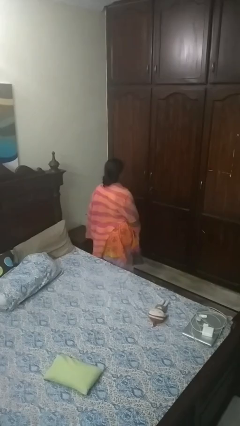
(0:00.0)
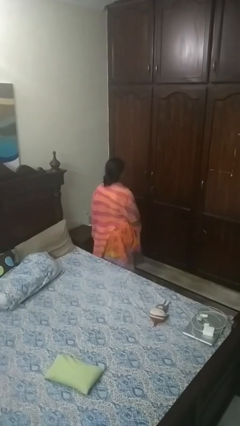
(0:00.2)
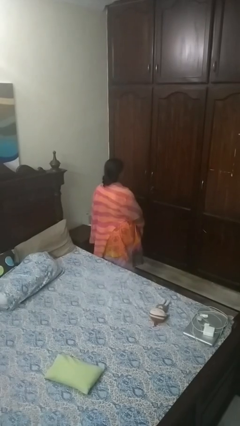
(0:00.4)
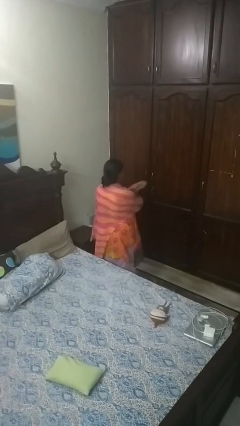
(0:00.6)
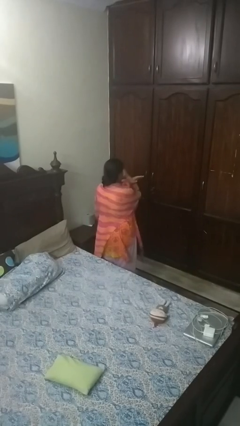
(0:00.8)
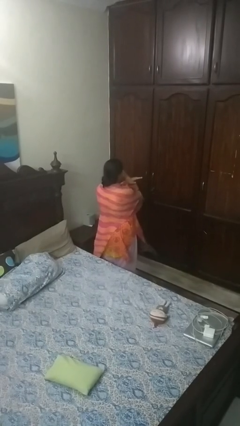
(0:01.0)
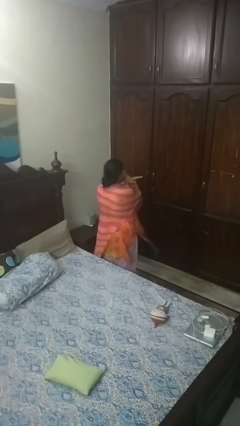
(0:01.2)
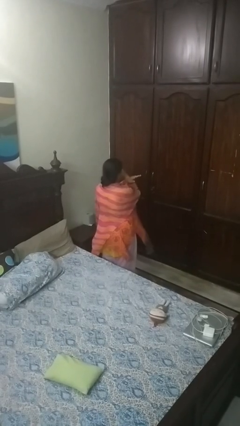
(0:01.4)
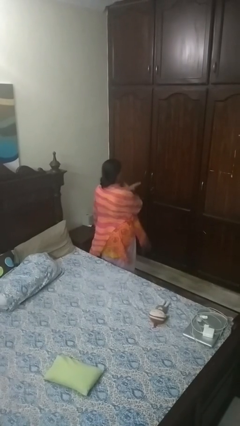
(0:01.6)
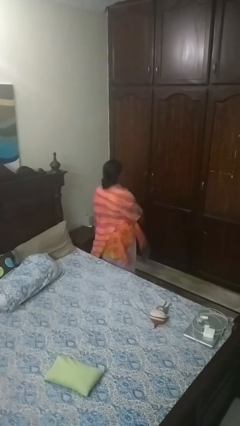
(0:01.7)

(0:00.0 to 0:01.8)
person gestures arms x

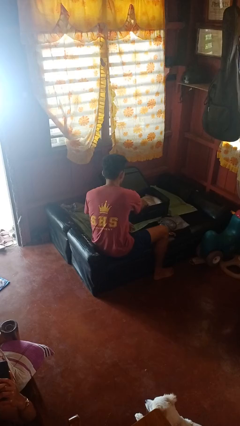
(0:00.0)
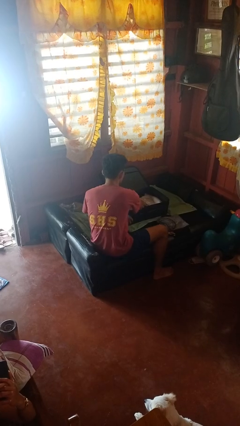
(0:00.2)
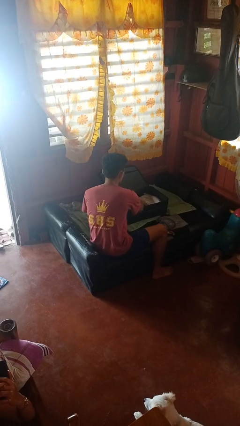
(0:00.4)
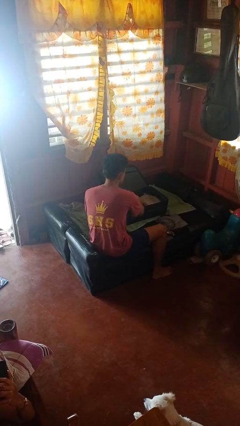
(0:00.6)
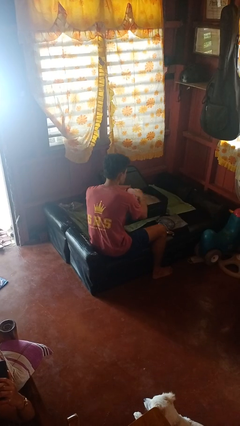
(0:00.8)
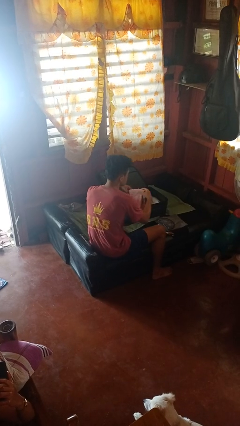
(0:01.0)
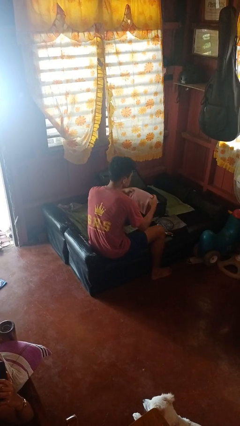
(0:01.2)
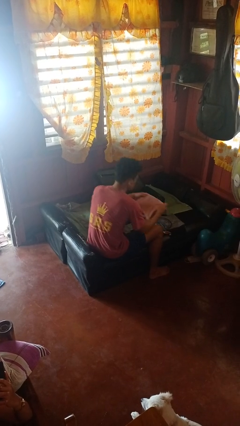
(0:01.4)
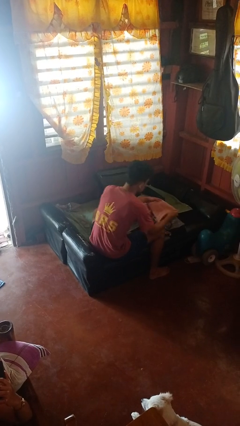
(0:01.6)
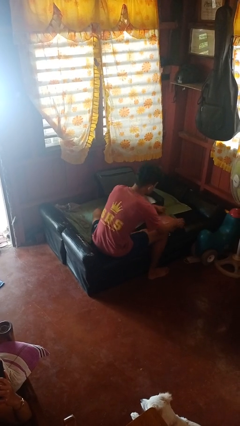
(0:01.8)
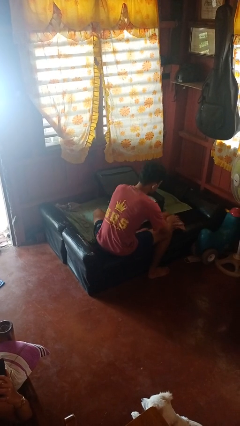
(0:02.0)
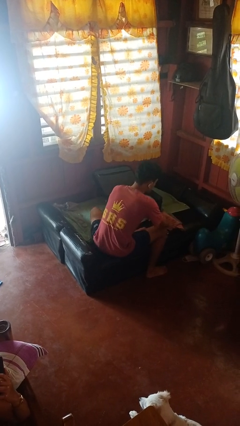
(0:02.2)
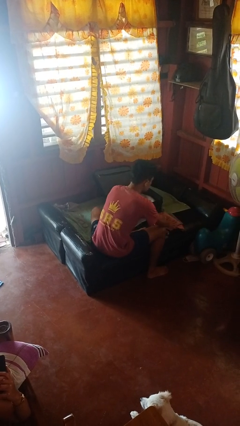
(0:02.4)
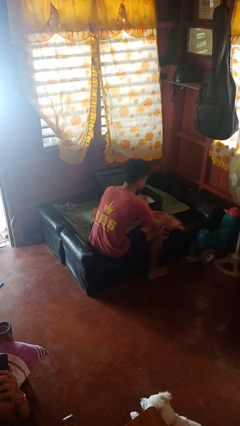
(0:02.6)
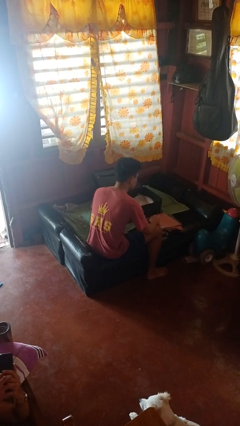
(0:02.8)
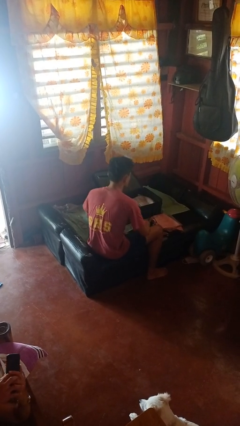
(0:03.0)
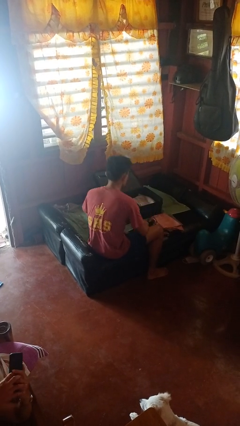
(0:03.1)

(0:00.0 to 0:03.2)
person unloads clothes from suitcase

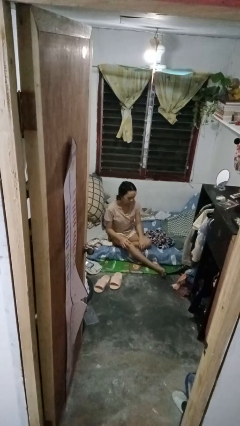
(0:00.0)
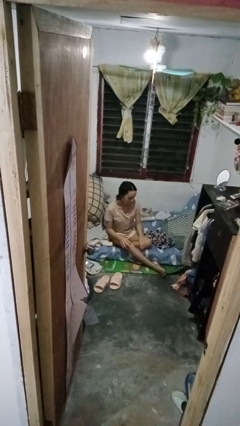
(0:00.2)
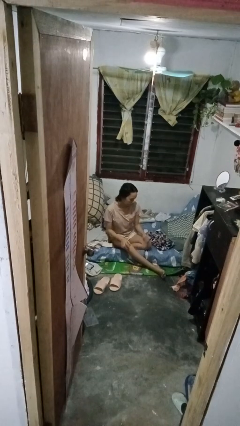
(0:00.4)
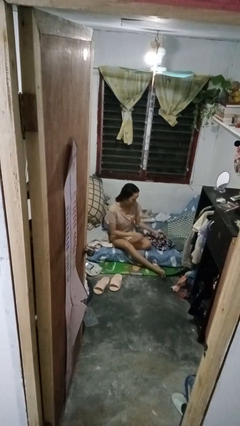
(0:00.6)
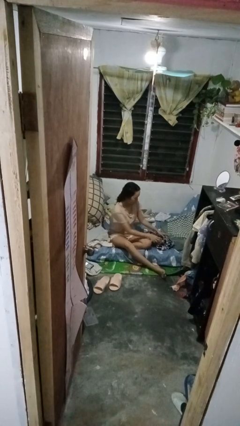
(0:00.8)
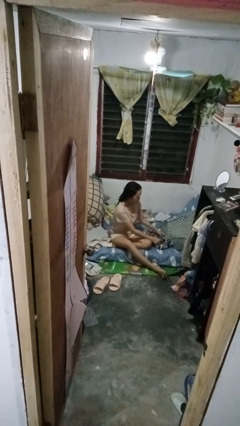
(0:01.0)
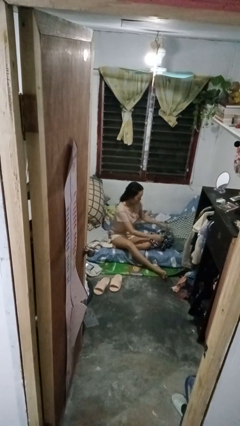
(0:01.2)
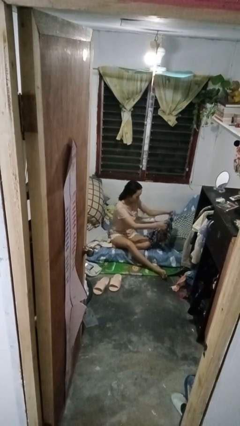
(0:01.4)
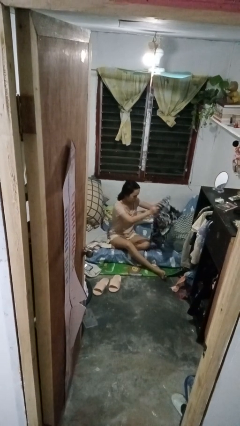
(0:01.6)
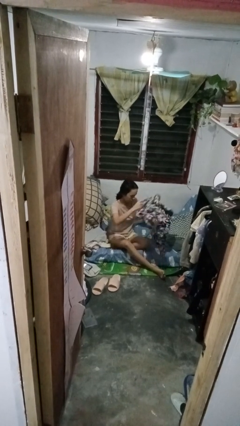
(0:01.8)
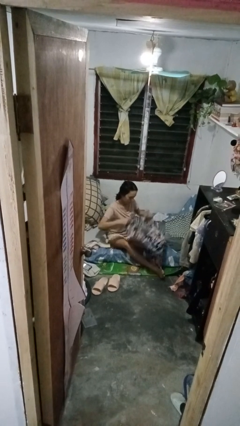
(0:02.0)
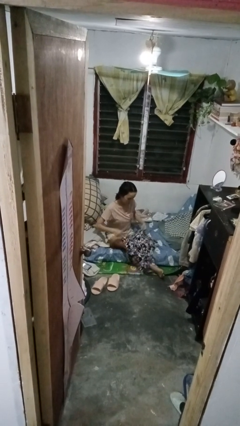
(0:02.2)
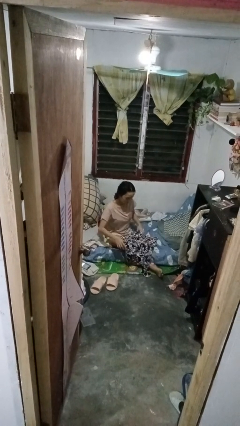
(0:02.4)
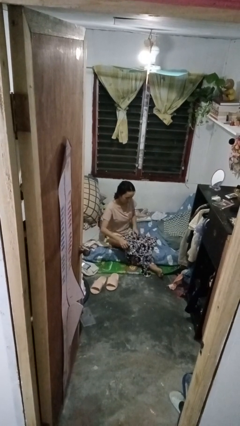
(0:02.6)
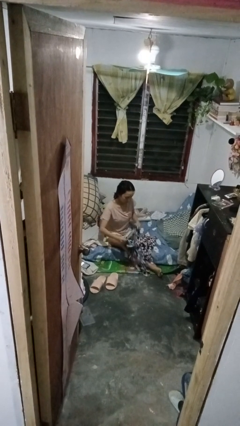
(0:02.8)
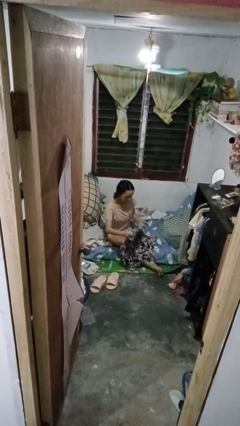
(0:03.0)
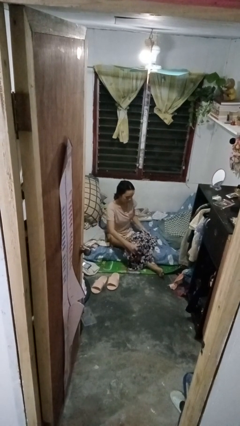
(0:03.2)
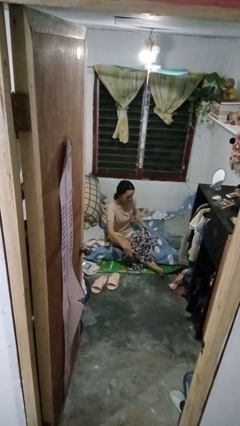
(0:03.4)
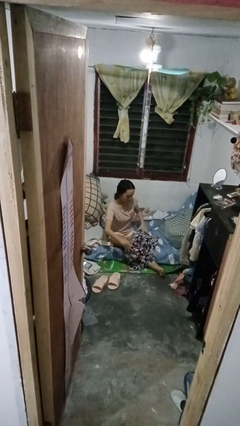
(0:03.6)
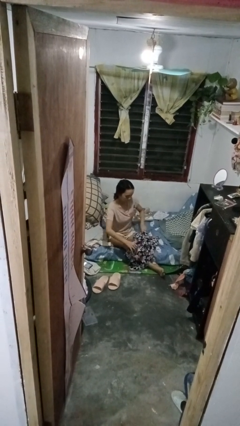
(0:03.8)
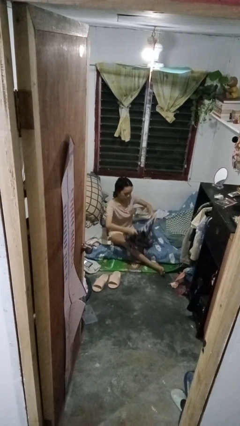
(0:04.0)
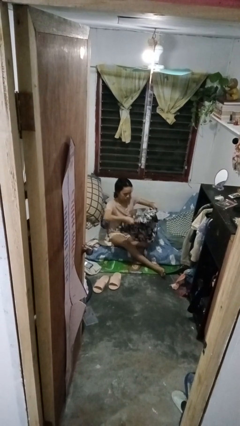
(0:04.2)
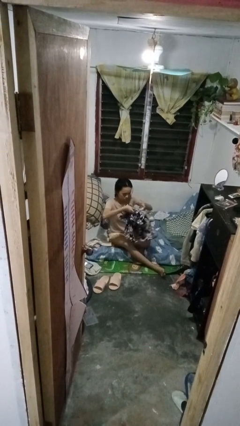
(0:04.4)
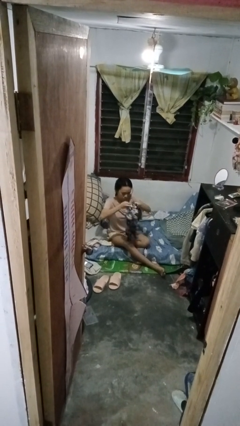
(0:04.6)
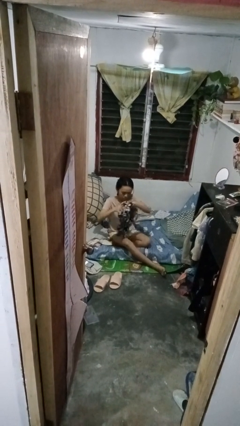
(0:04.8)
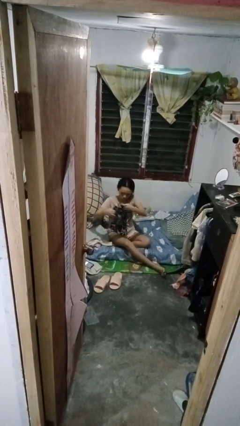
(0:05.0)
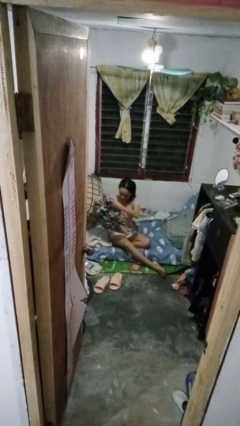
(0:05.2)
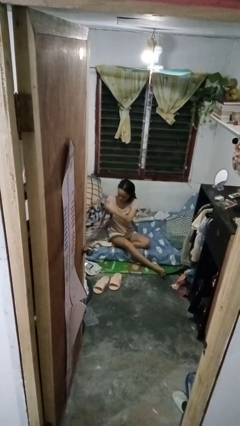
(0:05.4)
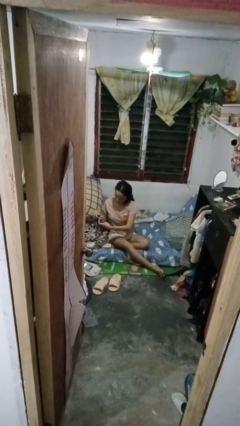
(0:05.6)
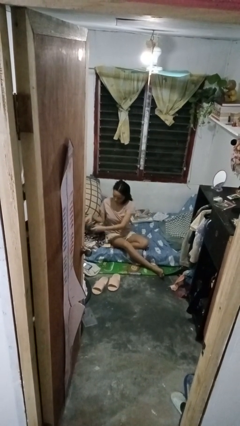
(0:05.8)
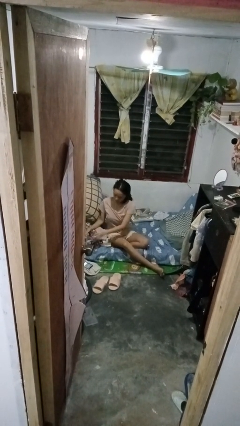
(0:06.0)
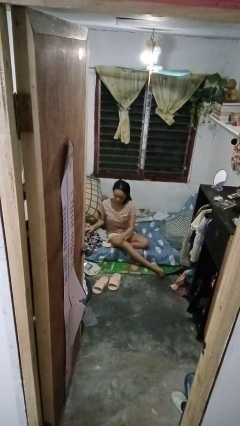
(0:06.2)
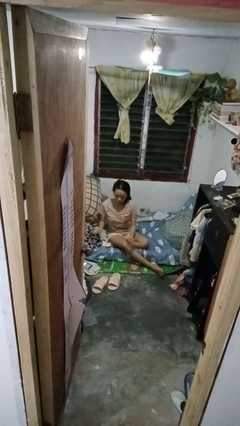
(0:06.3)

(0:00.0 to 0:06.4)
person folds shirt

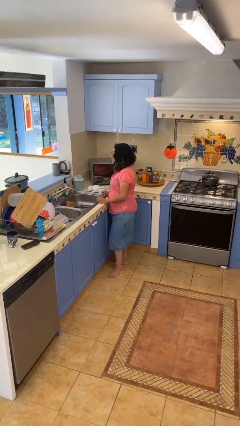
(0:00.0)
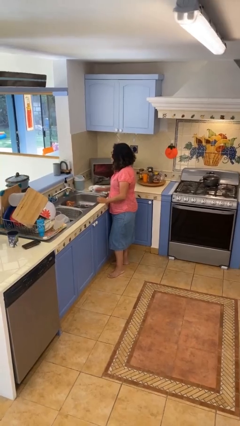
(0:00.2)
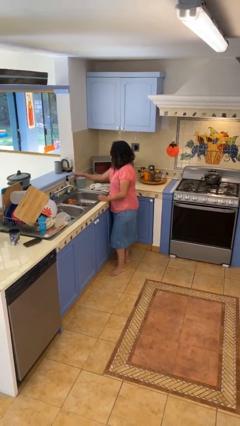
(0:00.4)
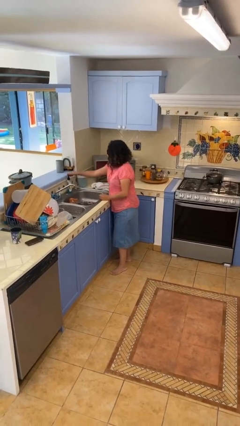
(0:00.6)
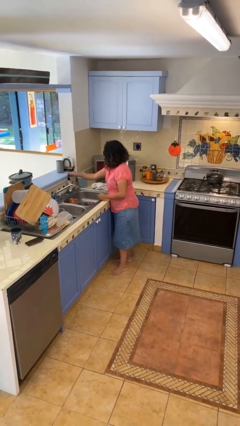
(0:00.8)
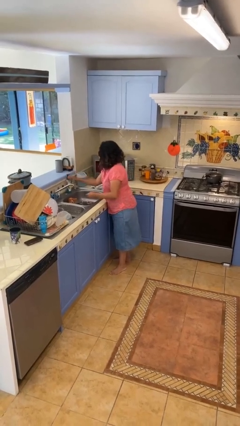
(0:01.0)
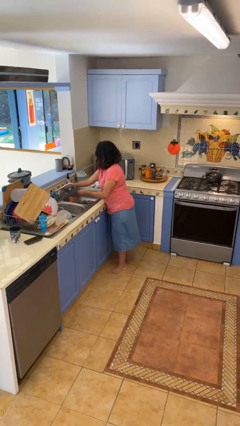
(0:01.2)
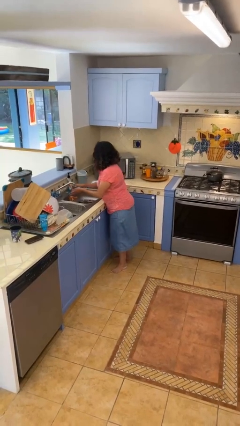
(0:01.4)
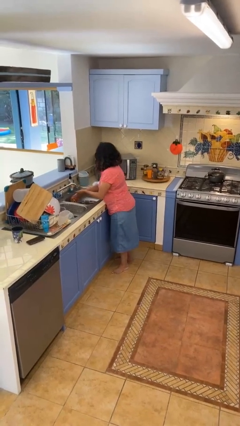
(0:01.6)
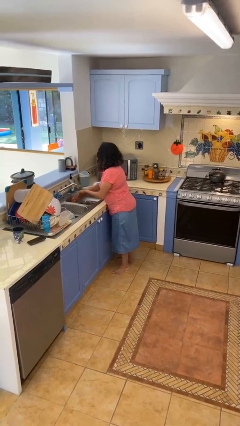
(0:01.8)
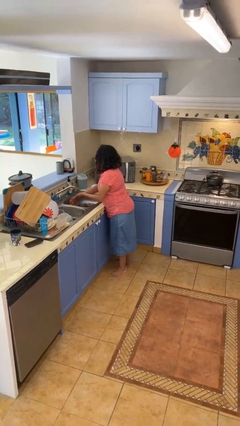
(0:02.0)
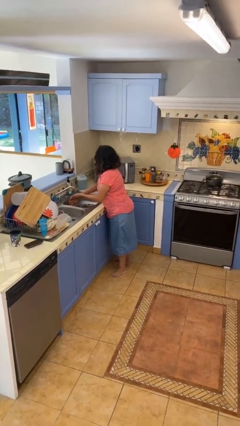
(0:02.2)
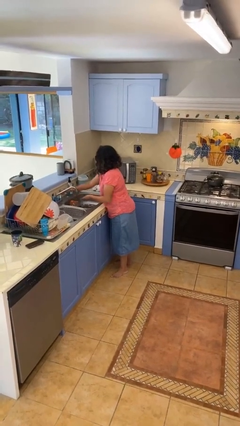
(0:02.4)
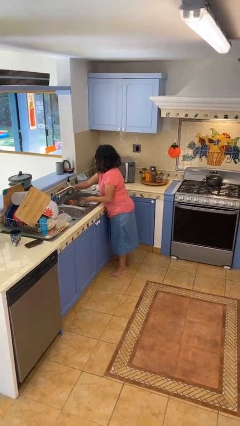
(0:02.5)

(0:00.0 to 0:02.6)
person washes hands

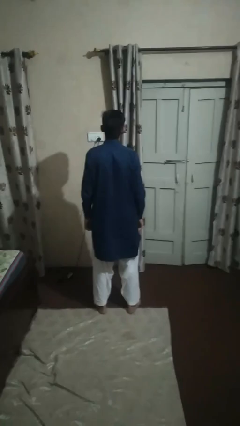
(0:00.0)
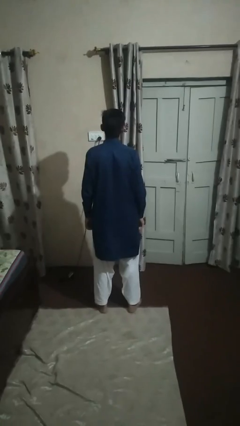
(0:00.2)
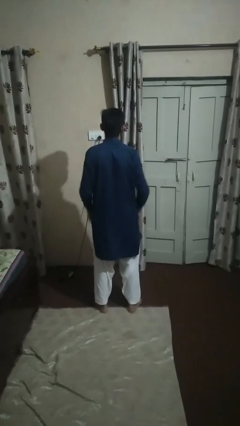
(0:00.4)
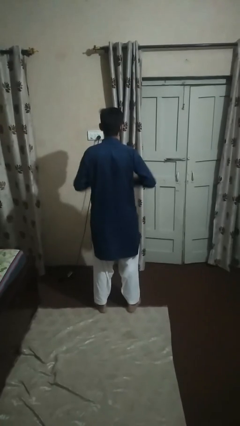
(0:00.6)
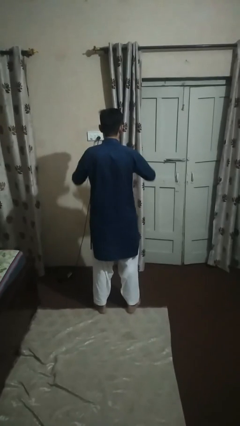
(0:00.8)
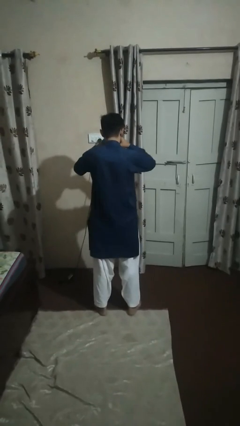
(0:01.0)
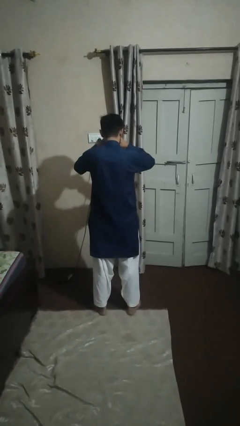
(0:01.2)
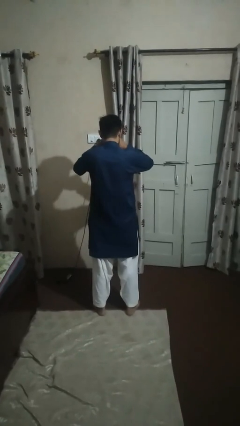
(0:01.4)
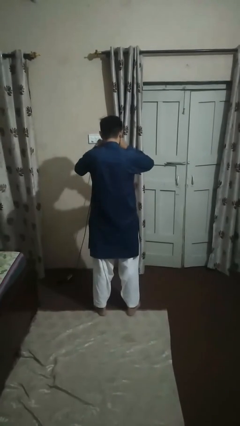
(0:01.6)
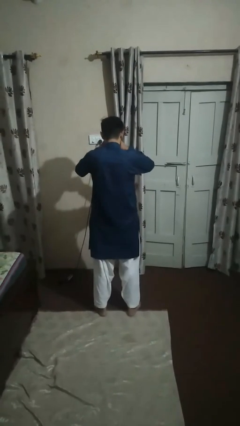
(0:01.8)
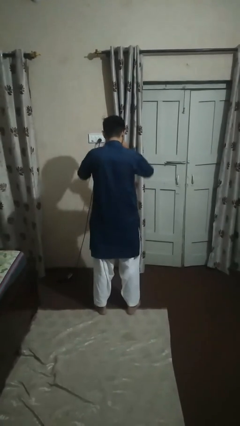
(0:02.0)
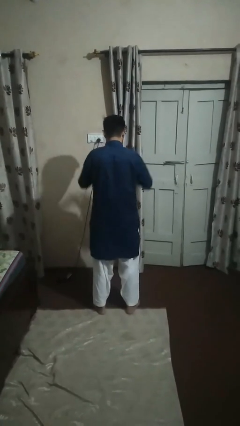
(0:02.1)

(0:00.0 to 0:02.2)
person rubs eyes

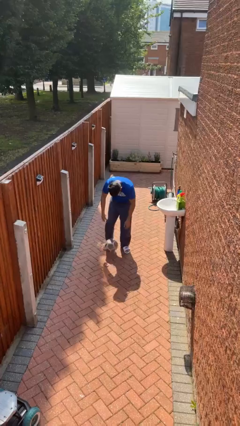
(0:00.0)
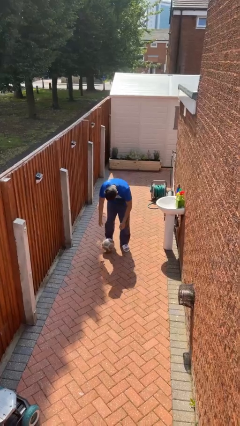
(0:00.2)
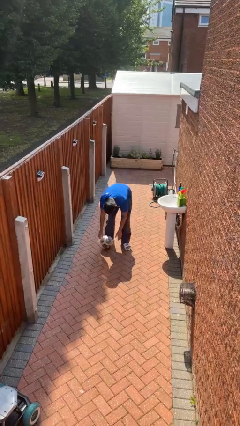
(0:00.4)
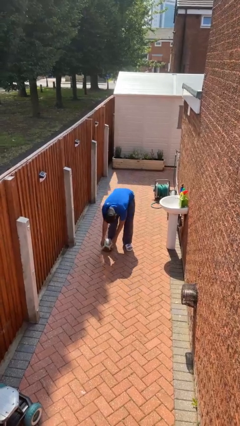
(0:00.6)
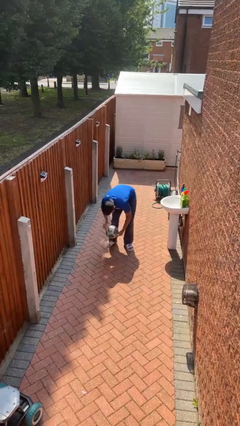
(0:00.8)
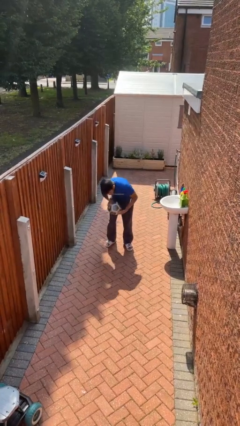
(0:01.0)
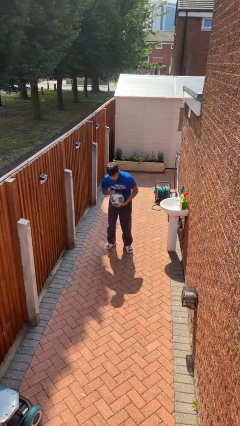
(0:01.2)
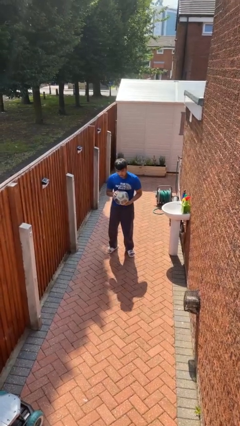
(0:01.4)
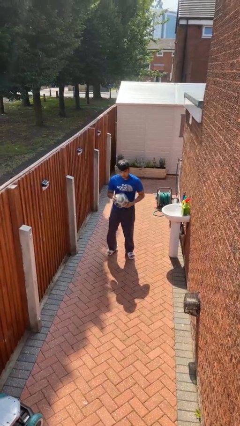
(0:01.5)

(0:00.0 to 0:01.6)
person picks up object from floor
